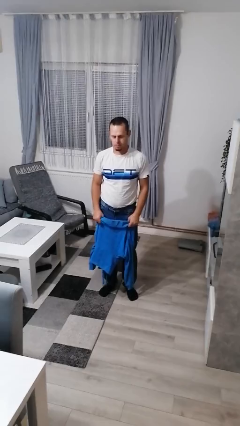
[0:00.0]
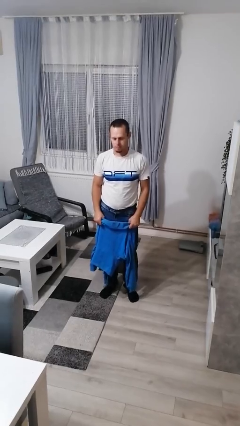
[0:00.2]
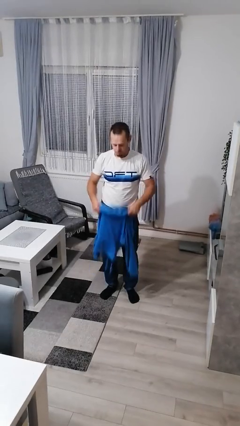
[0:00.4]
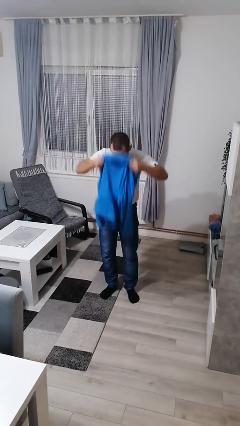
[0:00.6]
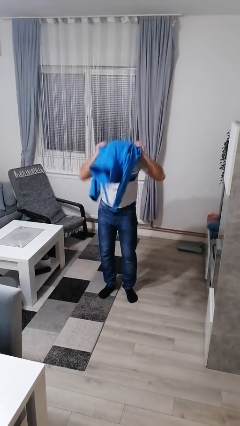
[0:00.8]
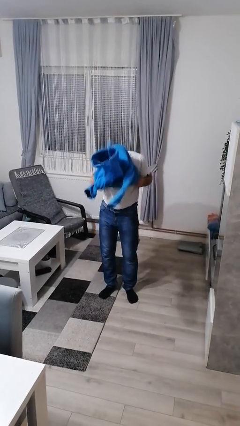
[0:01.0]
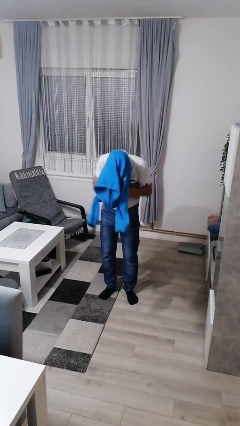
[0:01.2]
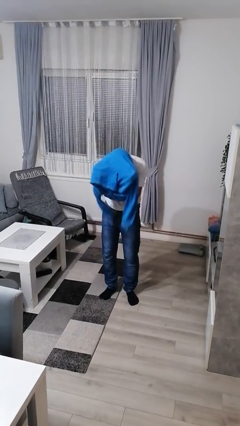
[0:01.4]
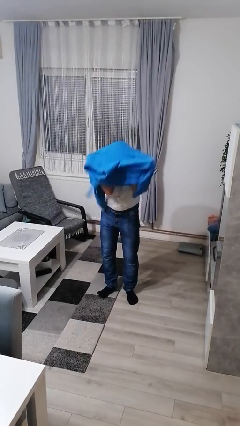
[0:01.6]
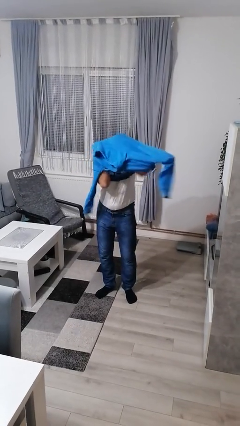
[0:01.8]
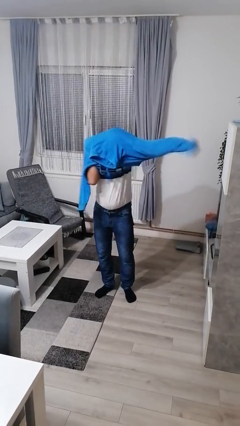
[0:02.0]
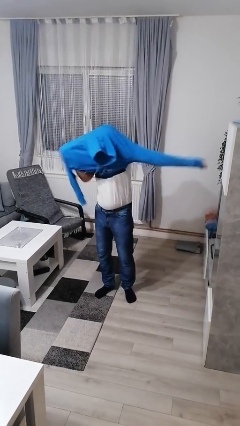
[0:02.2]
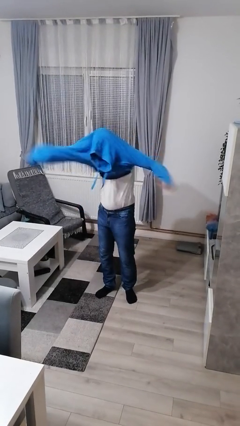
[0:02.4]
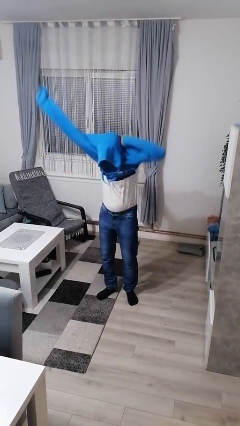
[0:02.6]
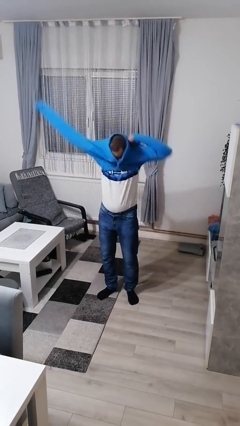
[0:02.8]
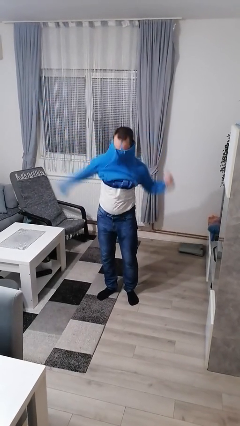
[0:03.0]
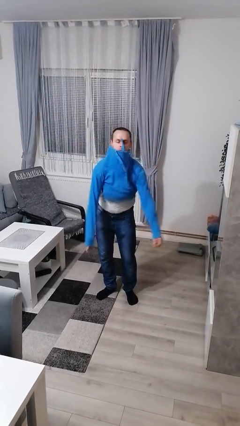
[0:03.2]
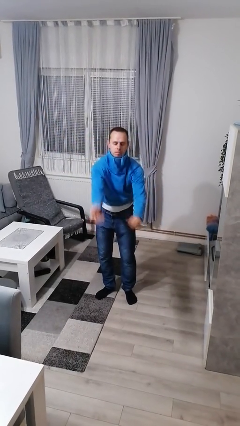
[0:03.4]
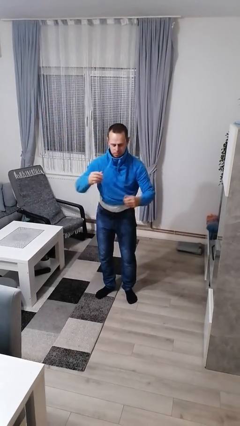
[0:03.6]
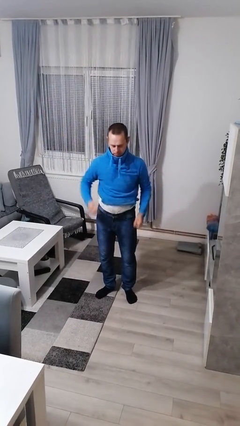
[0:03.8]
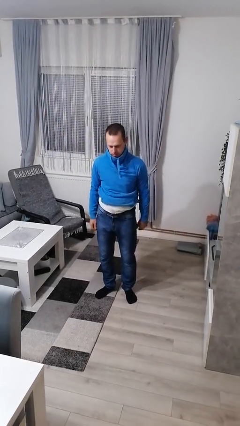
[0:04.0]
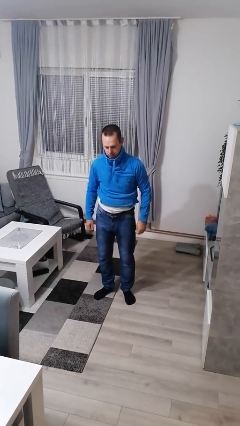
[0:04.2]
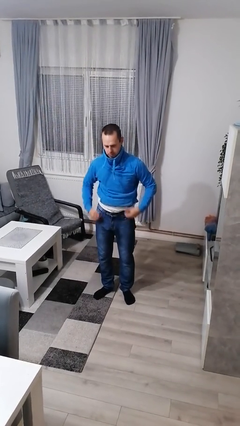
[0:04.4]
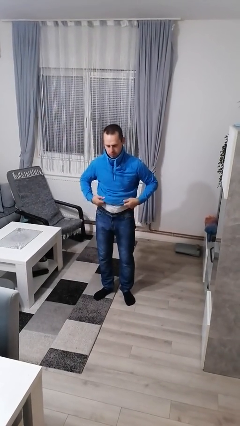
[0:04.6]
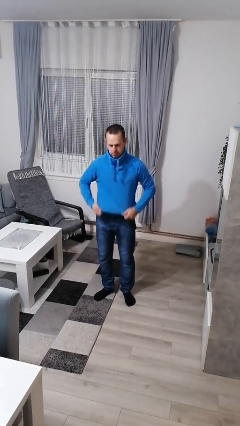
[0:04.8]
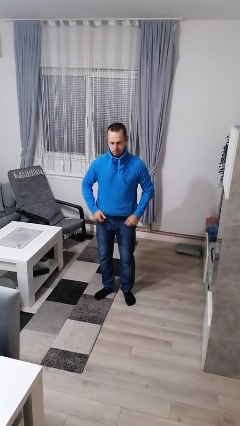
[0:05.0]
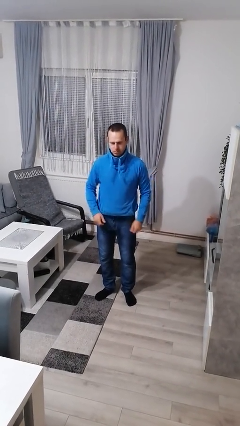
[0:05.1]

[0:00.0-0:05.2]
person puts on hoodie

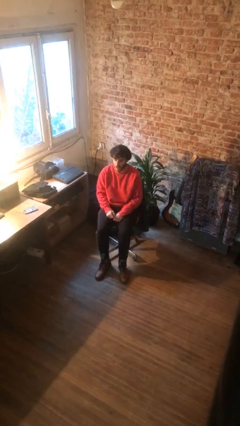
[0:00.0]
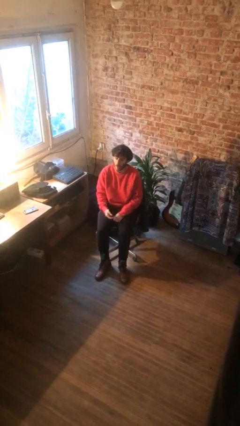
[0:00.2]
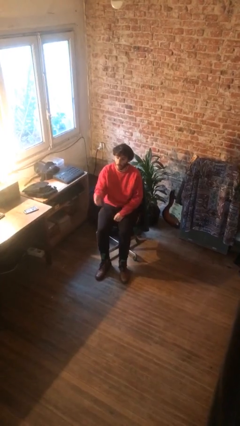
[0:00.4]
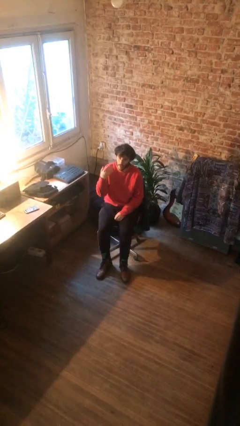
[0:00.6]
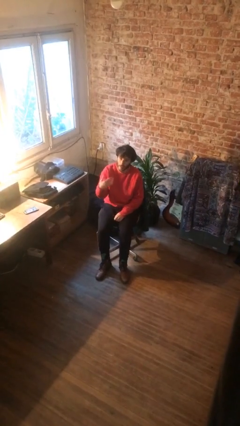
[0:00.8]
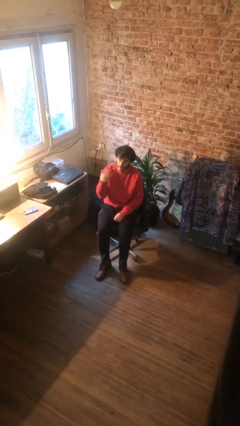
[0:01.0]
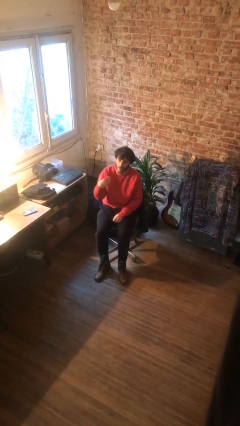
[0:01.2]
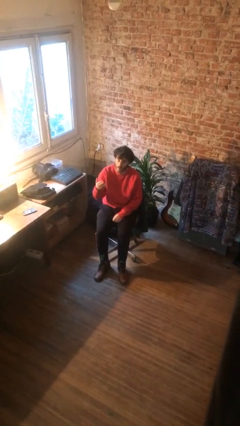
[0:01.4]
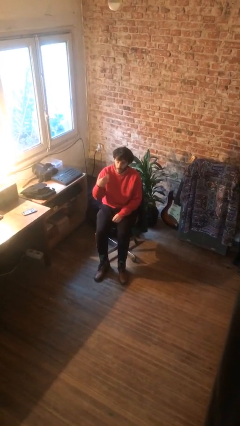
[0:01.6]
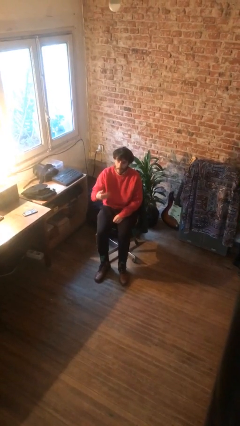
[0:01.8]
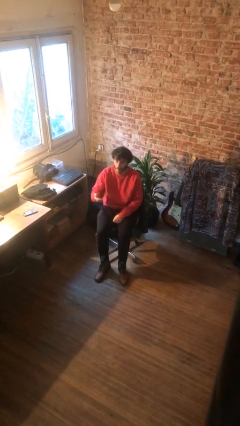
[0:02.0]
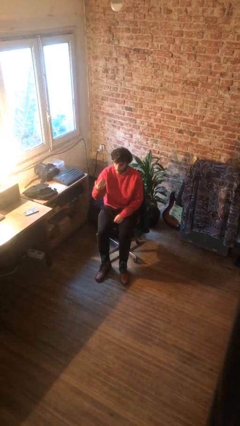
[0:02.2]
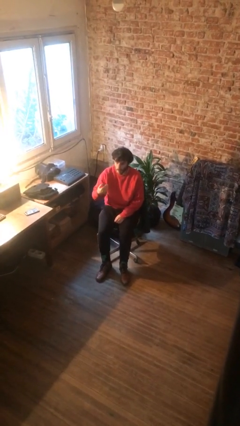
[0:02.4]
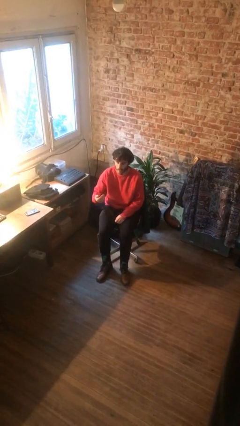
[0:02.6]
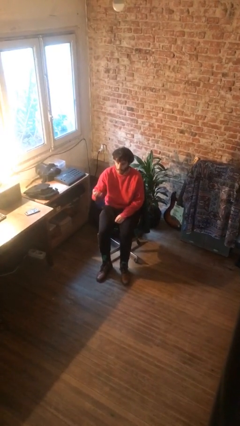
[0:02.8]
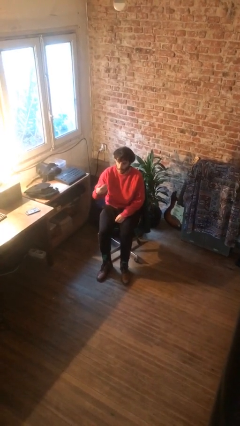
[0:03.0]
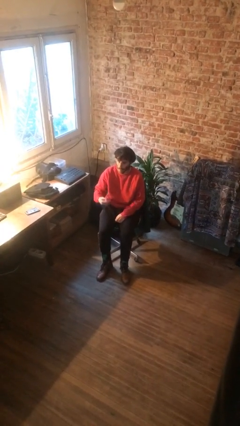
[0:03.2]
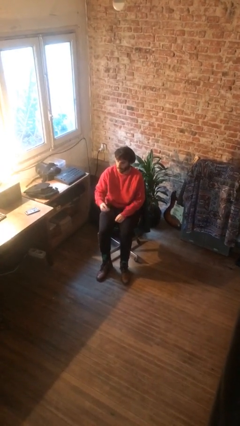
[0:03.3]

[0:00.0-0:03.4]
person gestures come here

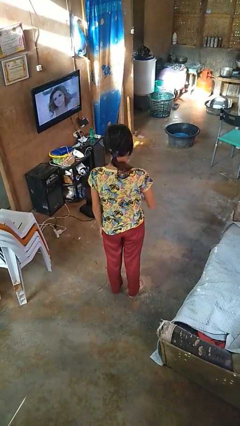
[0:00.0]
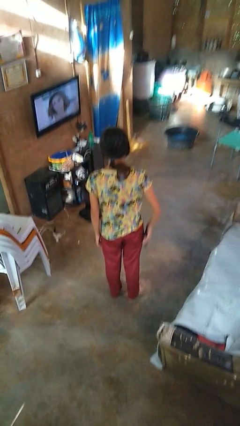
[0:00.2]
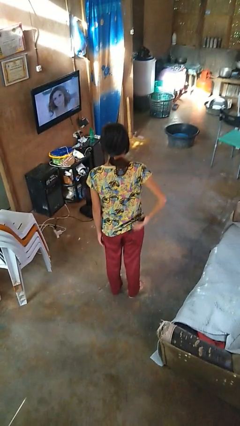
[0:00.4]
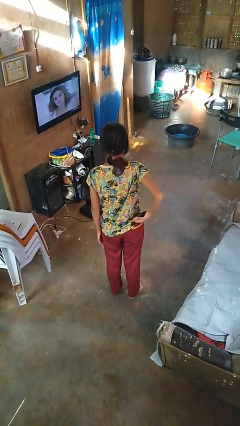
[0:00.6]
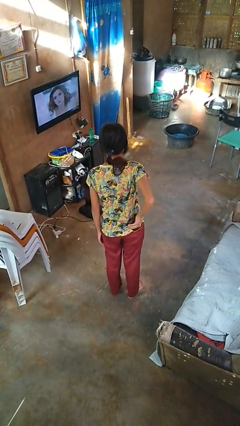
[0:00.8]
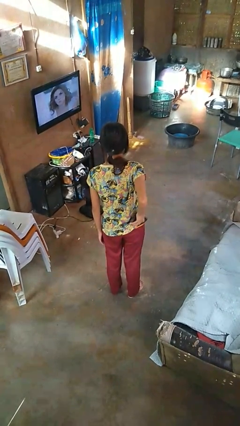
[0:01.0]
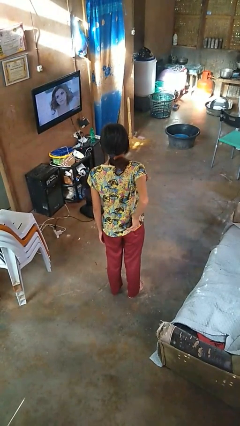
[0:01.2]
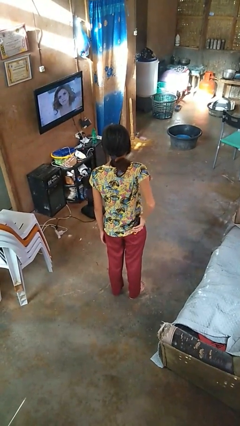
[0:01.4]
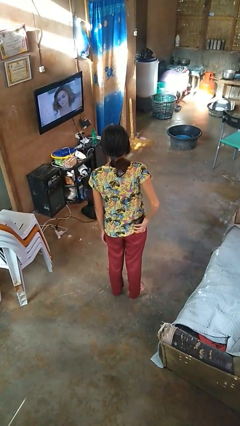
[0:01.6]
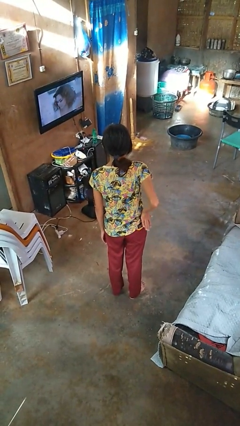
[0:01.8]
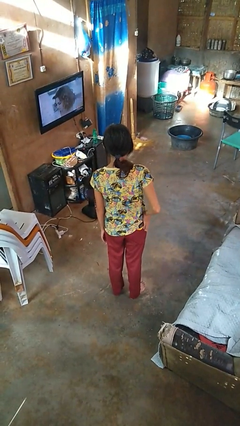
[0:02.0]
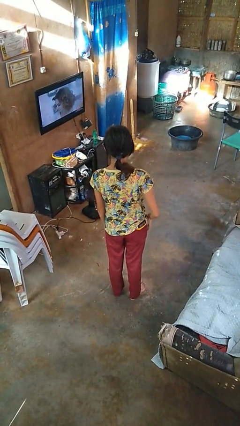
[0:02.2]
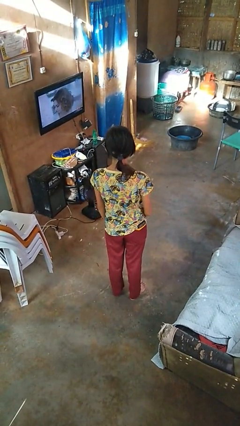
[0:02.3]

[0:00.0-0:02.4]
person puts phone into pocket

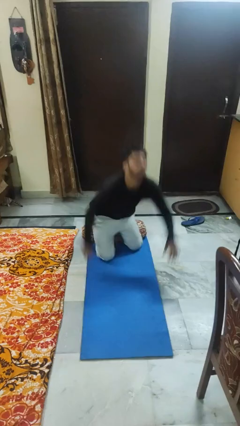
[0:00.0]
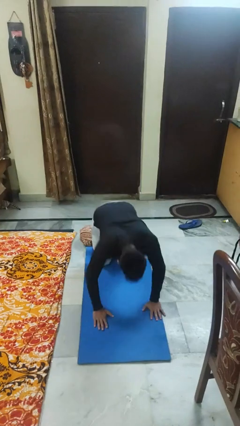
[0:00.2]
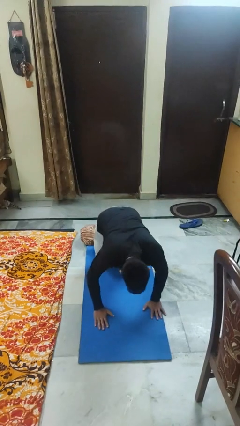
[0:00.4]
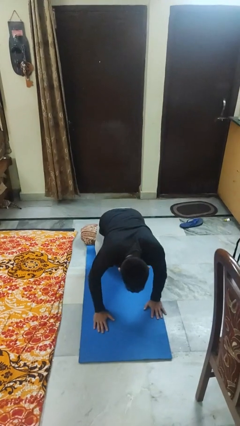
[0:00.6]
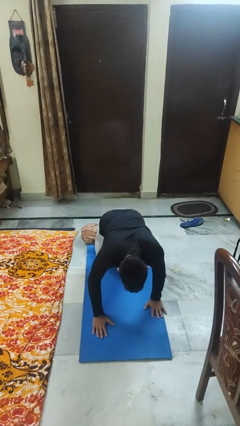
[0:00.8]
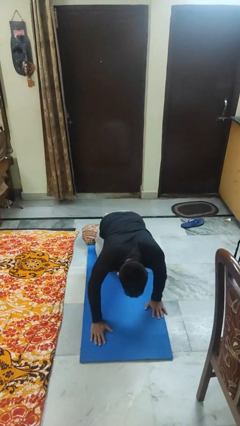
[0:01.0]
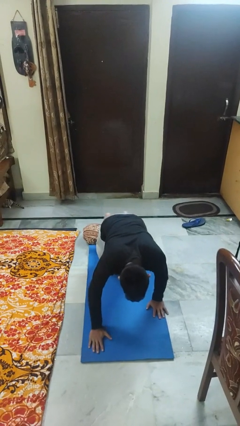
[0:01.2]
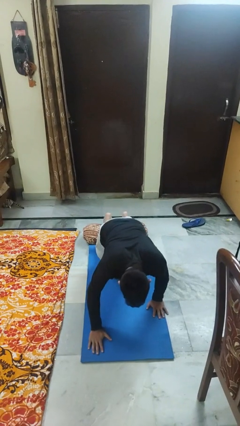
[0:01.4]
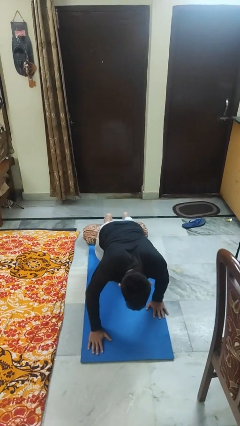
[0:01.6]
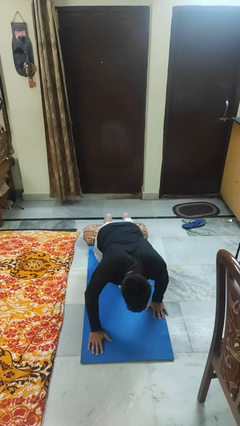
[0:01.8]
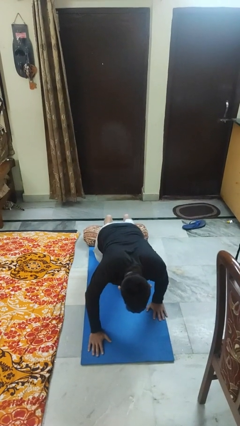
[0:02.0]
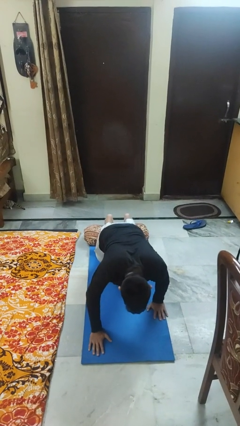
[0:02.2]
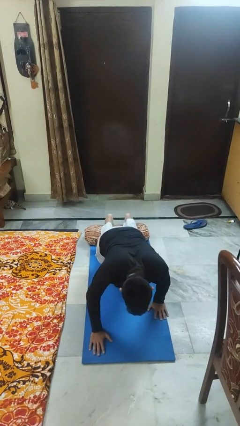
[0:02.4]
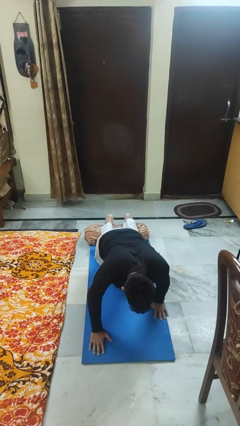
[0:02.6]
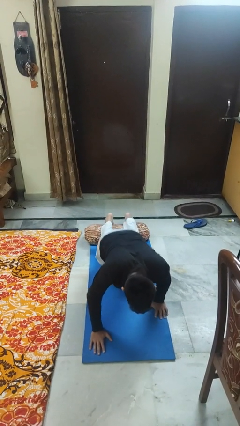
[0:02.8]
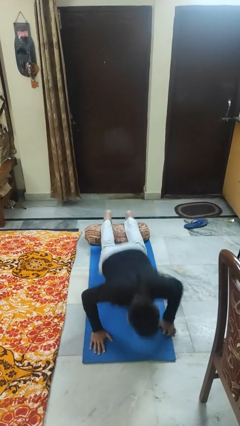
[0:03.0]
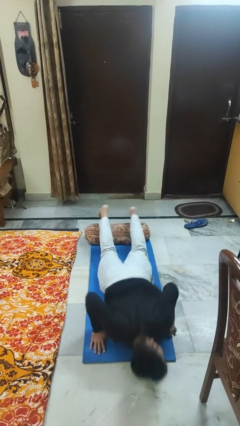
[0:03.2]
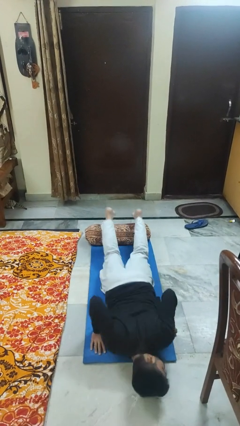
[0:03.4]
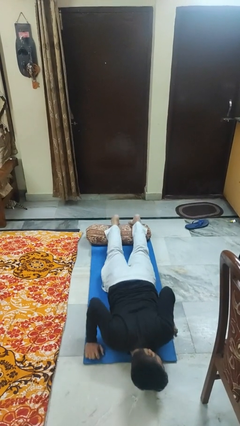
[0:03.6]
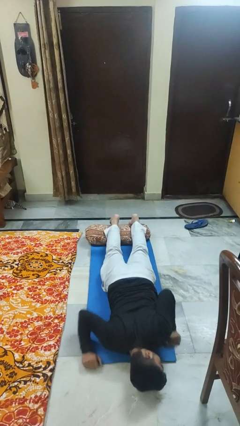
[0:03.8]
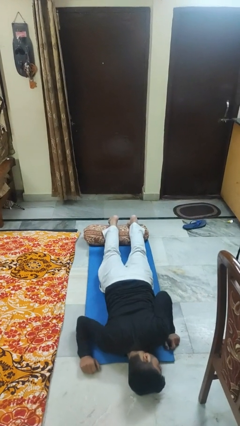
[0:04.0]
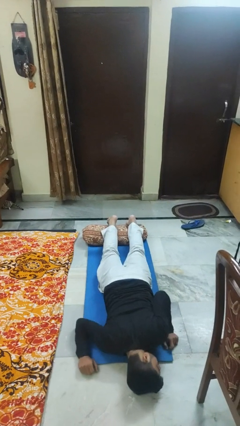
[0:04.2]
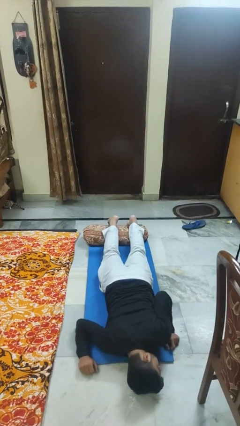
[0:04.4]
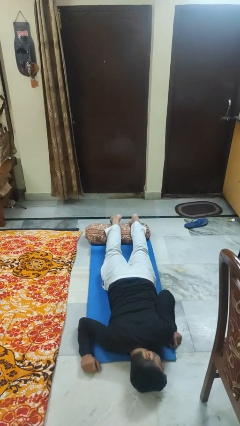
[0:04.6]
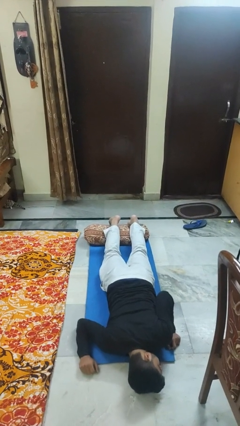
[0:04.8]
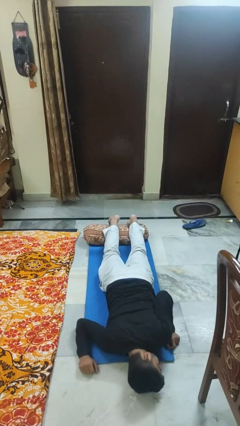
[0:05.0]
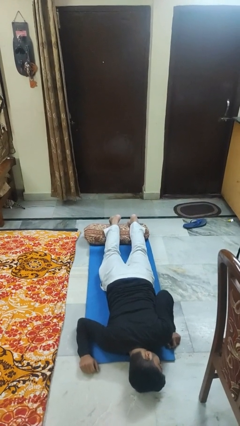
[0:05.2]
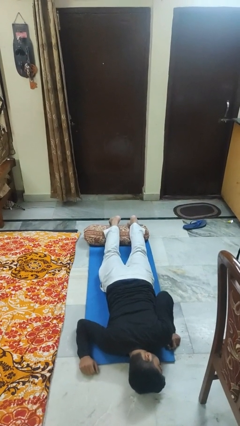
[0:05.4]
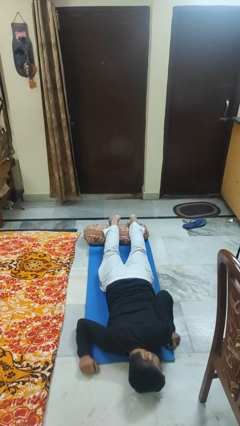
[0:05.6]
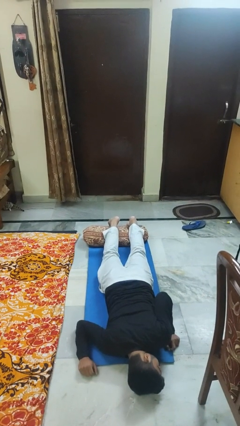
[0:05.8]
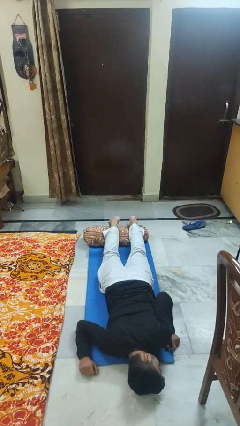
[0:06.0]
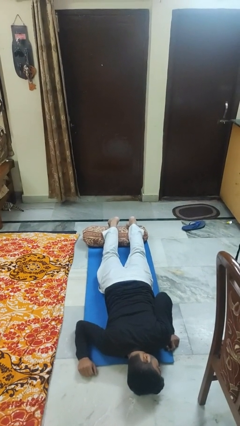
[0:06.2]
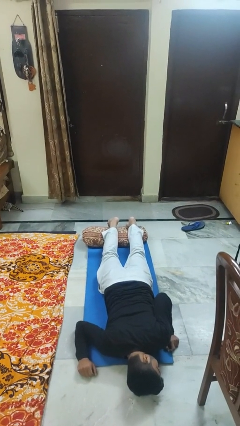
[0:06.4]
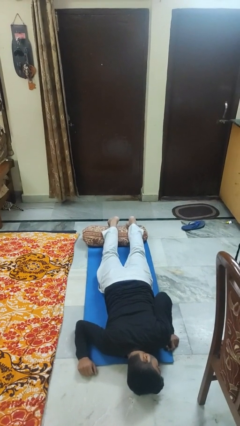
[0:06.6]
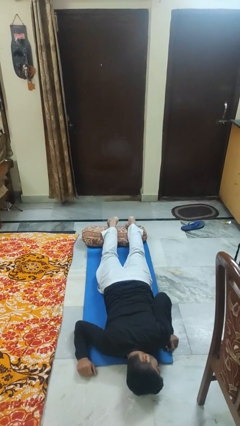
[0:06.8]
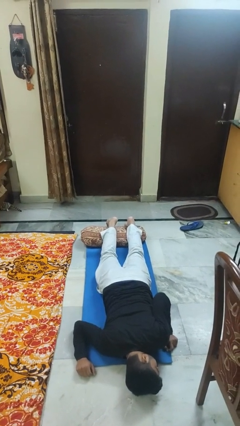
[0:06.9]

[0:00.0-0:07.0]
person lies down on floor
